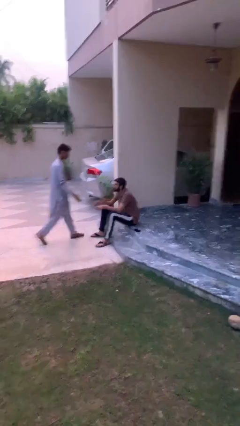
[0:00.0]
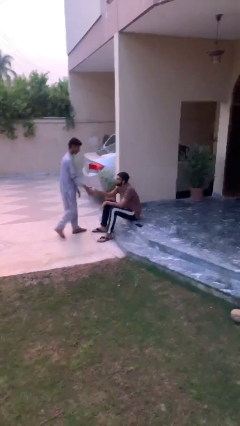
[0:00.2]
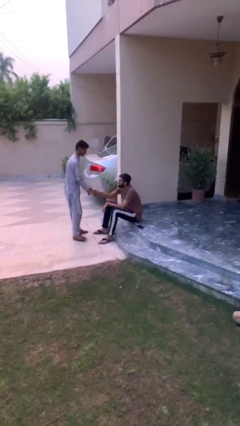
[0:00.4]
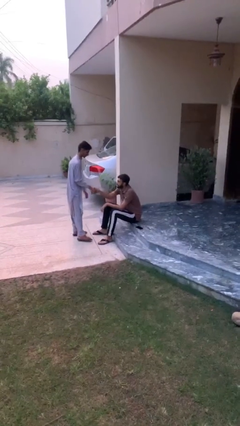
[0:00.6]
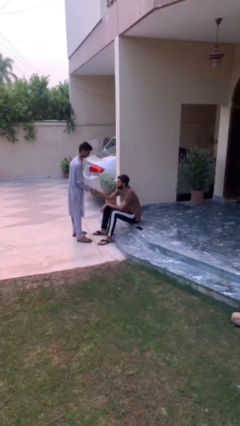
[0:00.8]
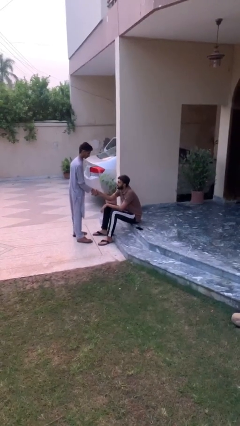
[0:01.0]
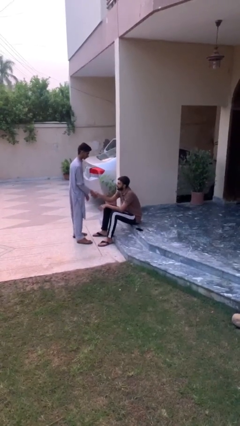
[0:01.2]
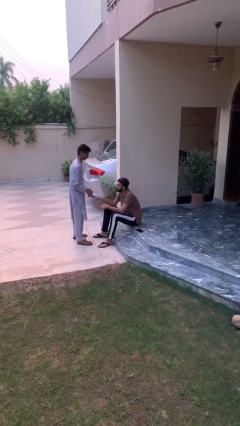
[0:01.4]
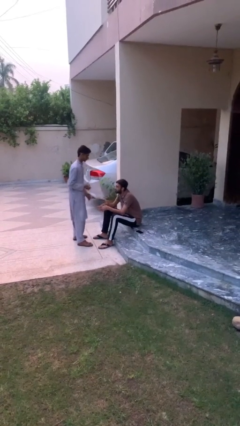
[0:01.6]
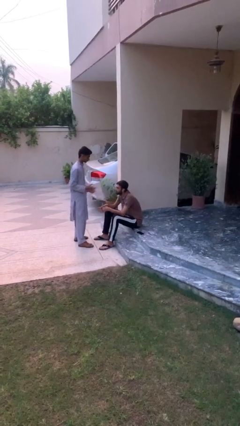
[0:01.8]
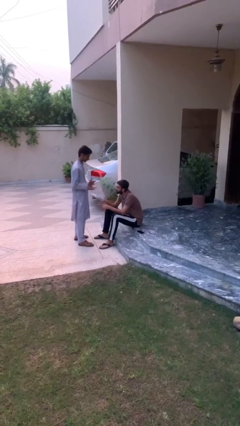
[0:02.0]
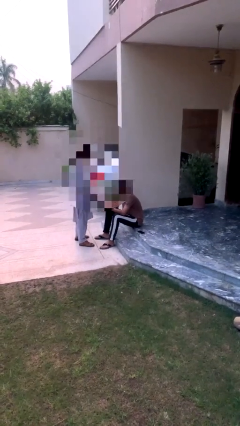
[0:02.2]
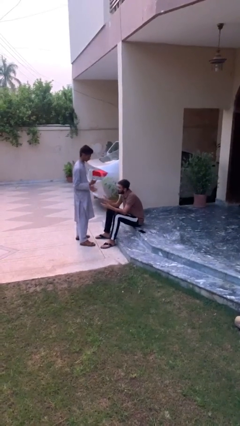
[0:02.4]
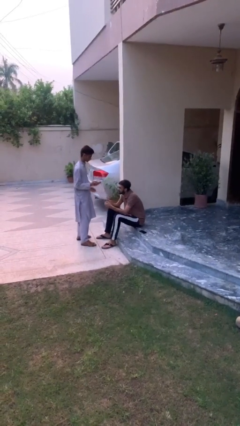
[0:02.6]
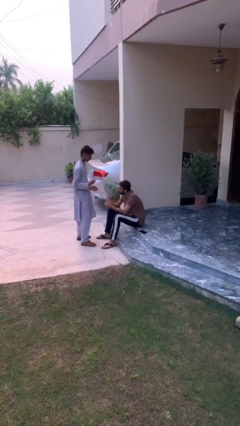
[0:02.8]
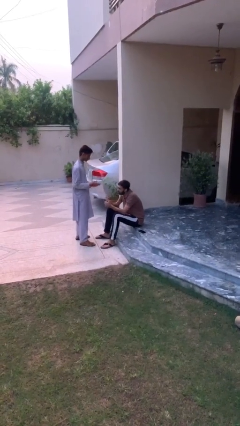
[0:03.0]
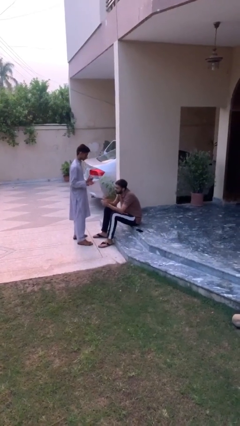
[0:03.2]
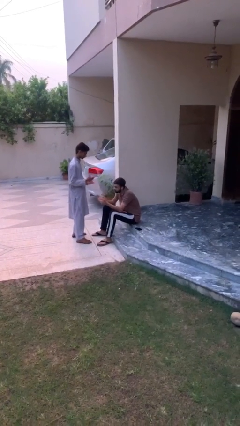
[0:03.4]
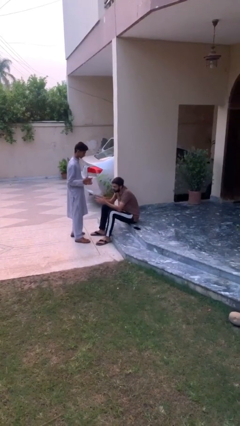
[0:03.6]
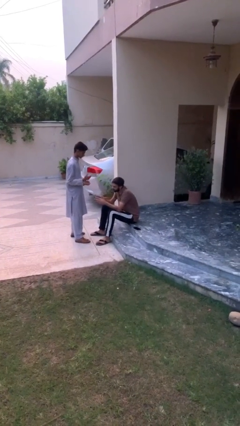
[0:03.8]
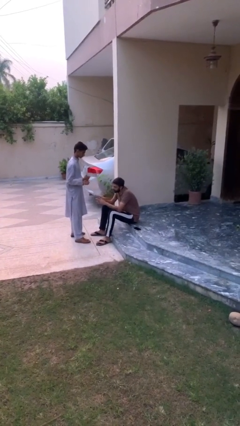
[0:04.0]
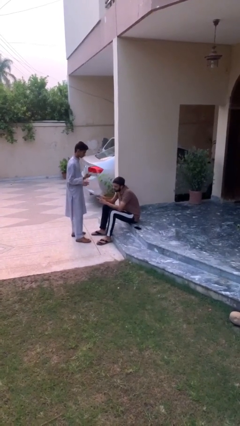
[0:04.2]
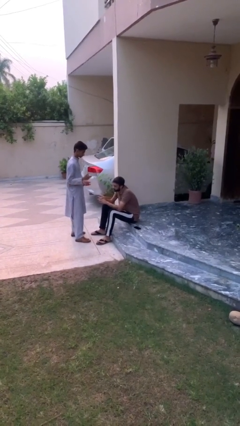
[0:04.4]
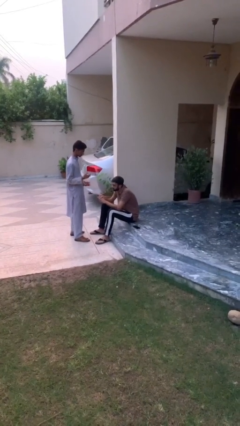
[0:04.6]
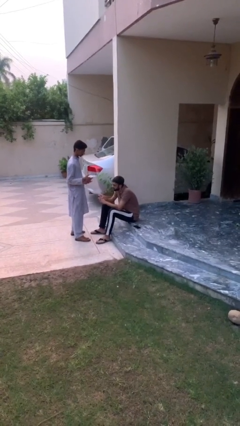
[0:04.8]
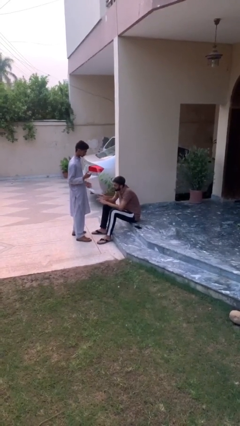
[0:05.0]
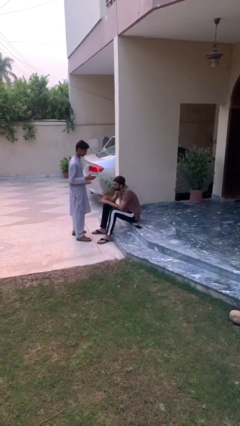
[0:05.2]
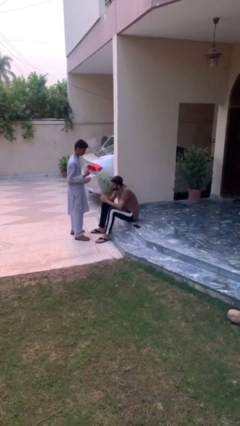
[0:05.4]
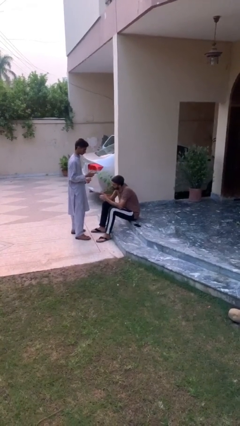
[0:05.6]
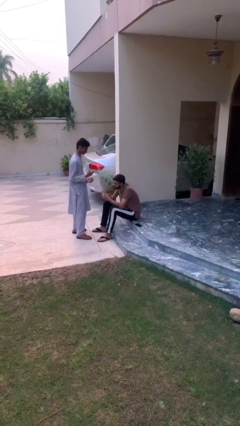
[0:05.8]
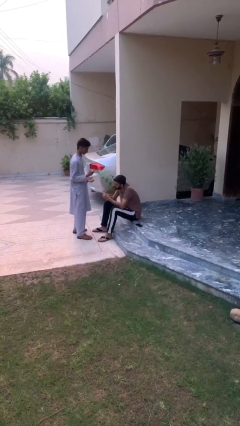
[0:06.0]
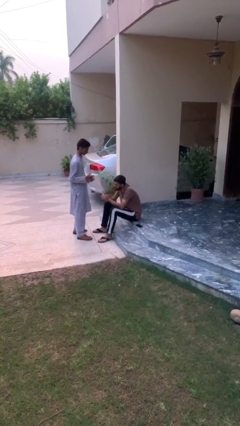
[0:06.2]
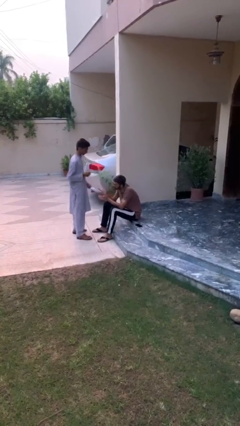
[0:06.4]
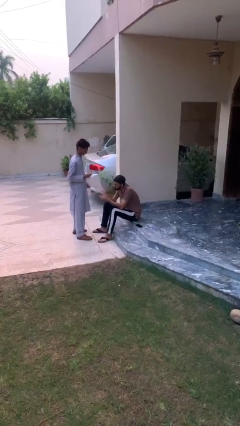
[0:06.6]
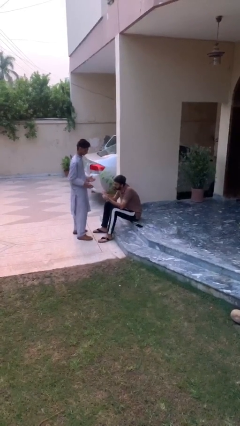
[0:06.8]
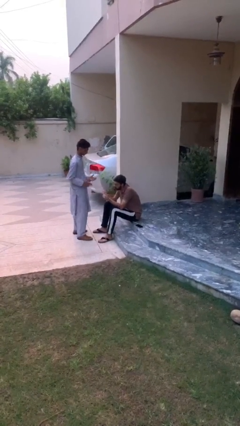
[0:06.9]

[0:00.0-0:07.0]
person shakes hand

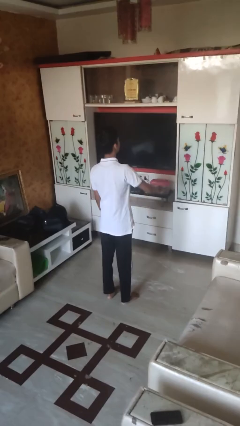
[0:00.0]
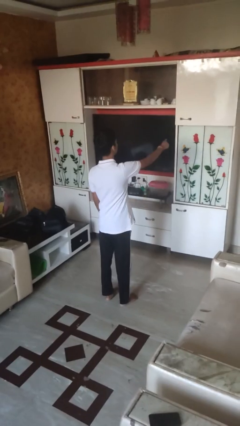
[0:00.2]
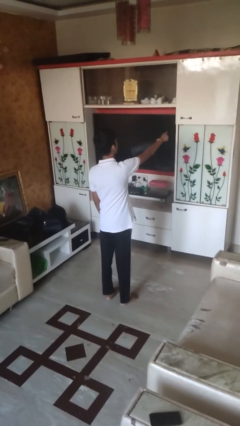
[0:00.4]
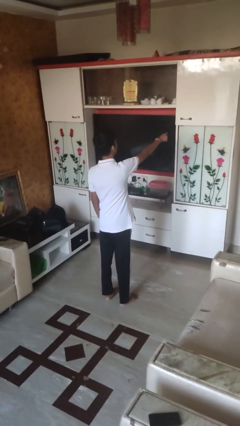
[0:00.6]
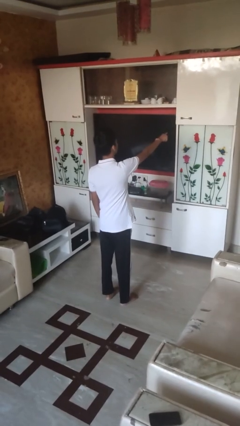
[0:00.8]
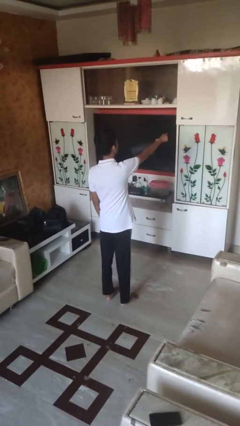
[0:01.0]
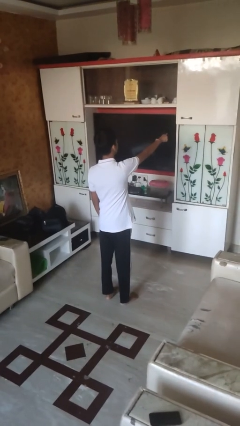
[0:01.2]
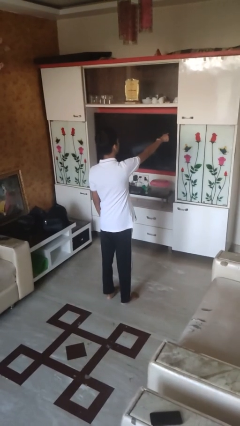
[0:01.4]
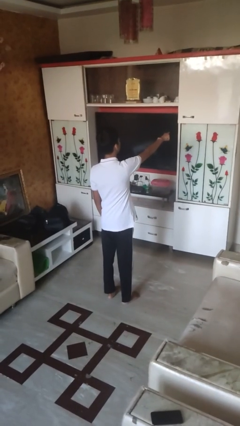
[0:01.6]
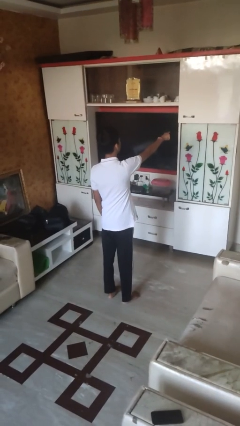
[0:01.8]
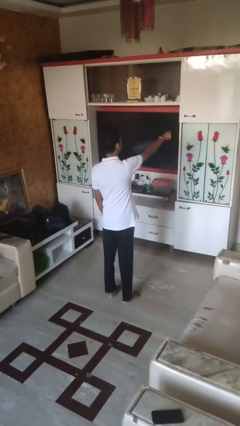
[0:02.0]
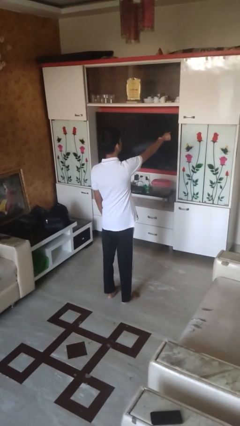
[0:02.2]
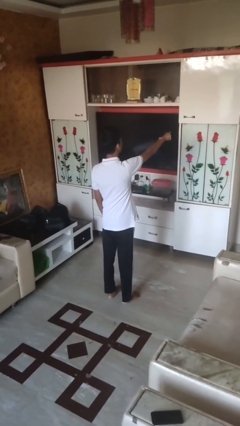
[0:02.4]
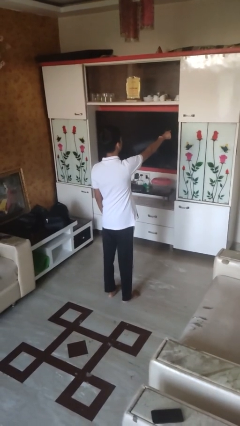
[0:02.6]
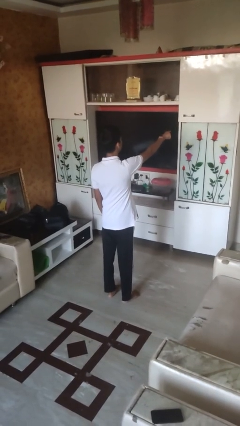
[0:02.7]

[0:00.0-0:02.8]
person points at person

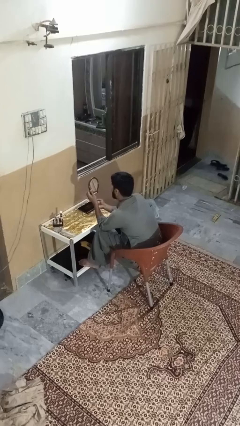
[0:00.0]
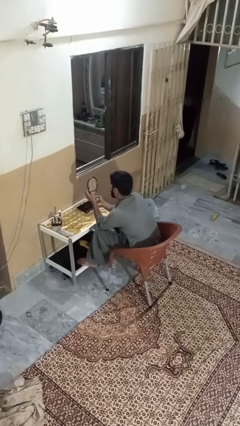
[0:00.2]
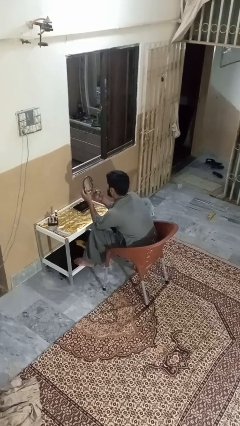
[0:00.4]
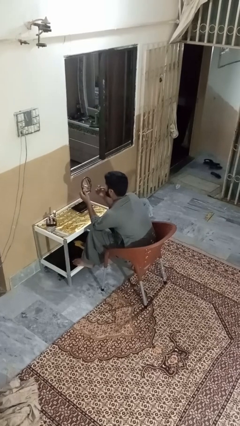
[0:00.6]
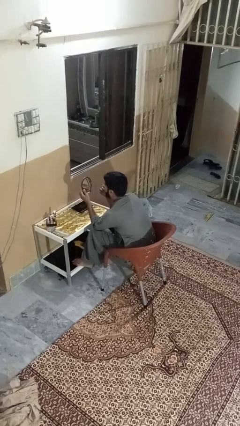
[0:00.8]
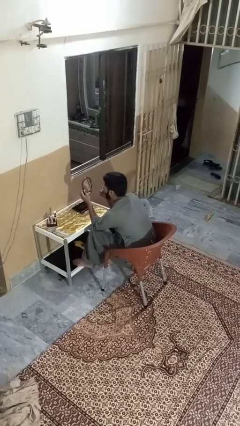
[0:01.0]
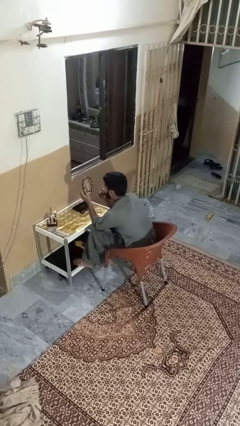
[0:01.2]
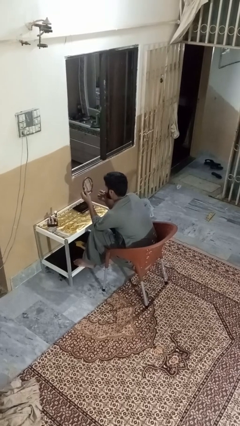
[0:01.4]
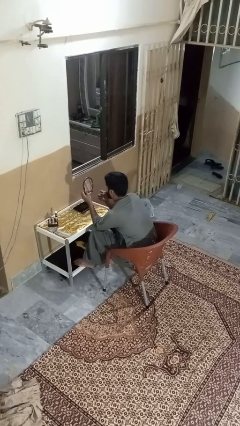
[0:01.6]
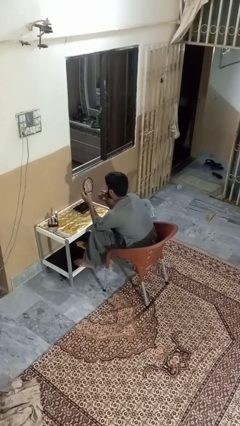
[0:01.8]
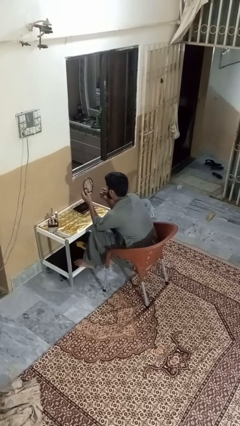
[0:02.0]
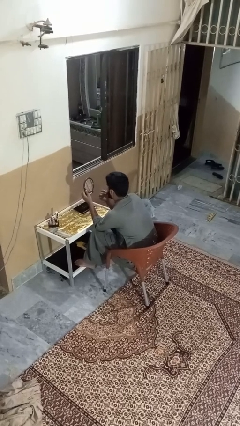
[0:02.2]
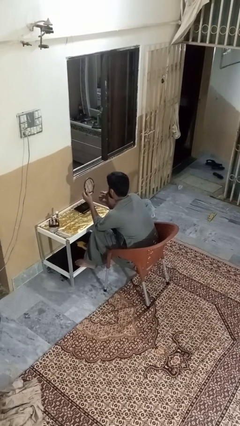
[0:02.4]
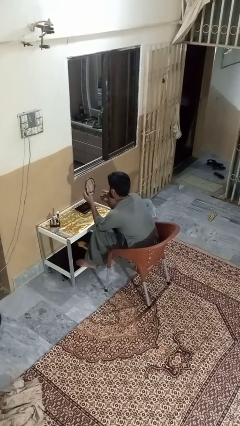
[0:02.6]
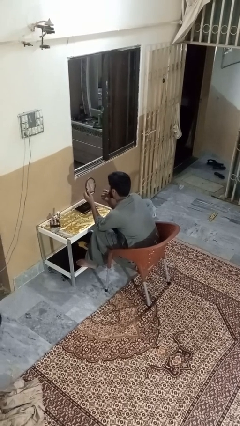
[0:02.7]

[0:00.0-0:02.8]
person applies lip makeup

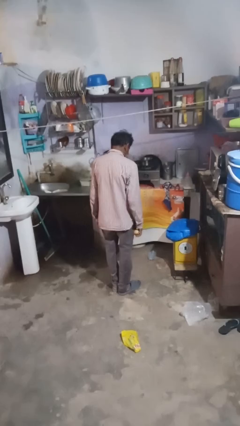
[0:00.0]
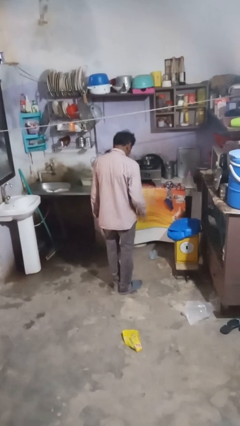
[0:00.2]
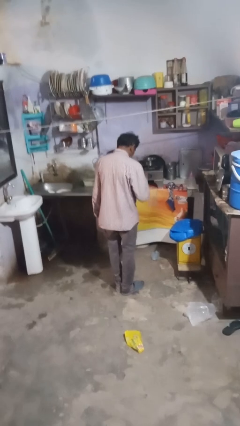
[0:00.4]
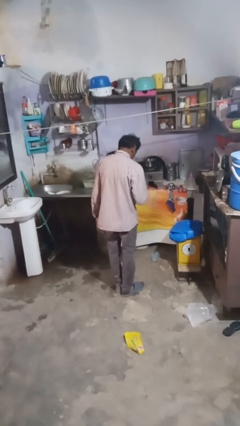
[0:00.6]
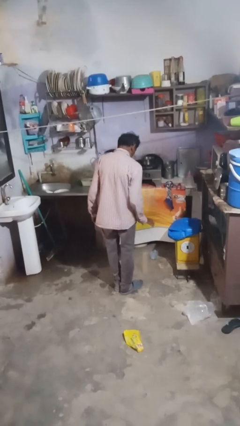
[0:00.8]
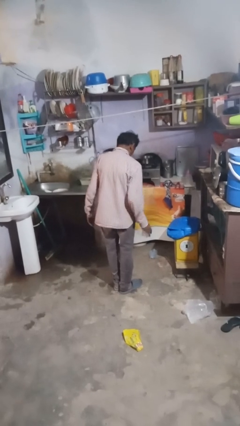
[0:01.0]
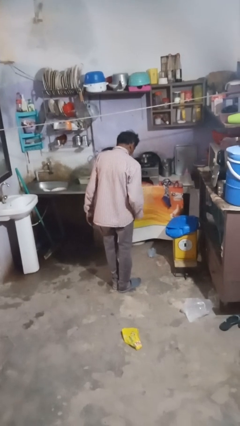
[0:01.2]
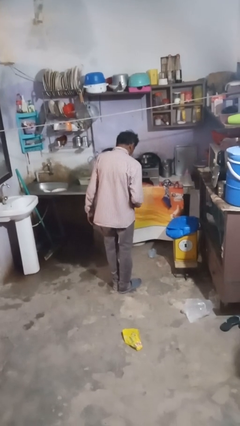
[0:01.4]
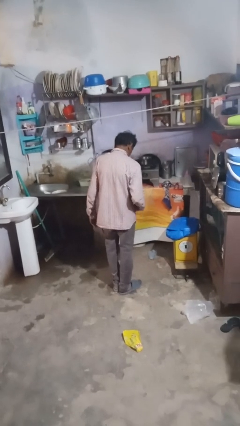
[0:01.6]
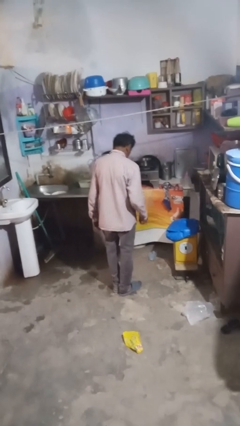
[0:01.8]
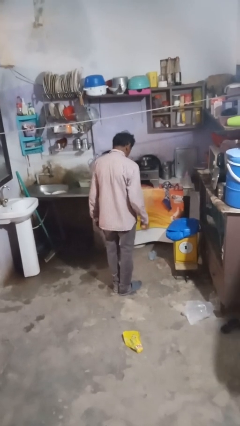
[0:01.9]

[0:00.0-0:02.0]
person bounces ball on floor

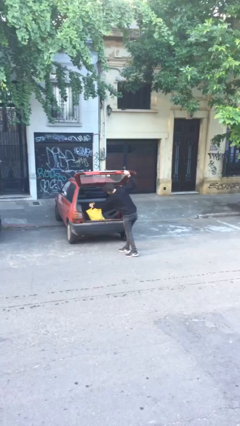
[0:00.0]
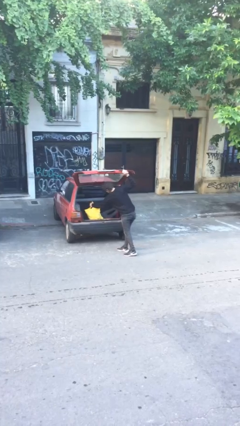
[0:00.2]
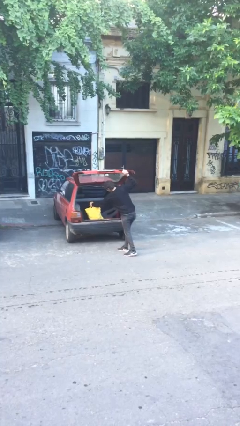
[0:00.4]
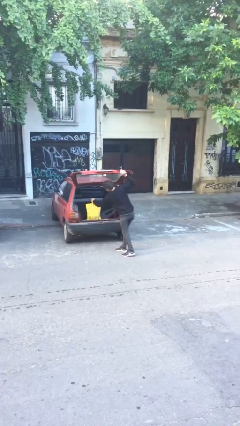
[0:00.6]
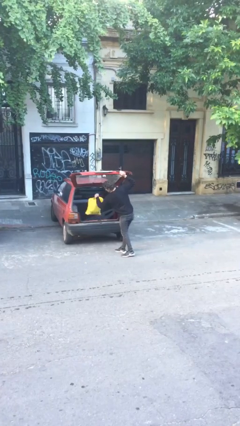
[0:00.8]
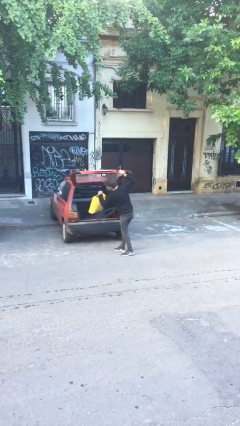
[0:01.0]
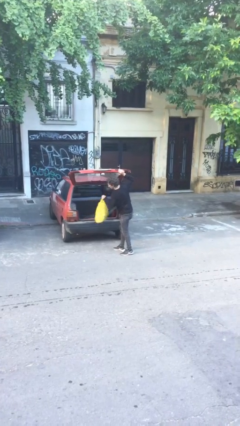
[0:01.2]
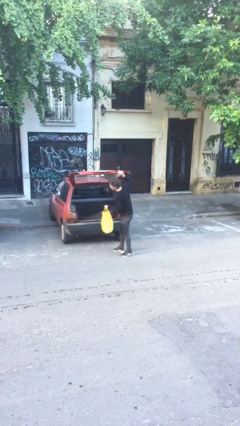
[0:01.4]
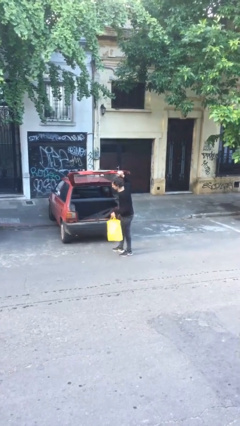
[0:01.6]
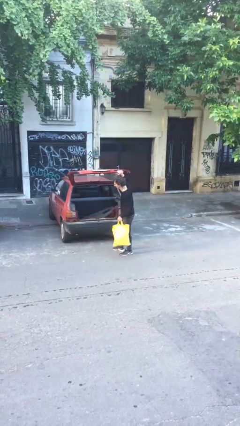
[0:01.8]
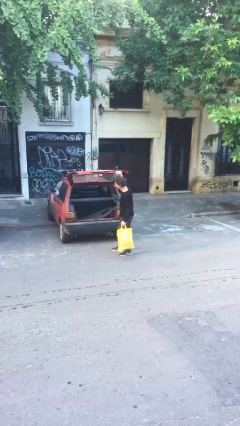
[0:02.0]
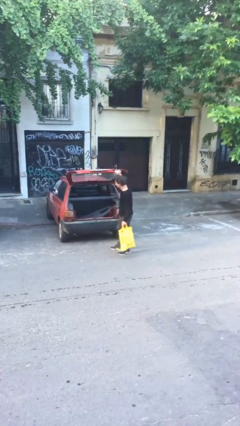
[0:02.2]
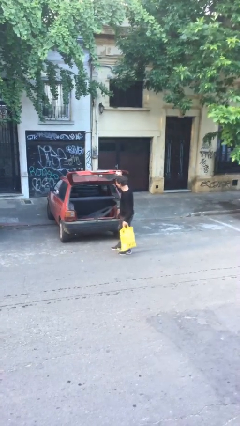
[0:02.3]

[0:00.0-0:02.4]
person unloads car

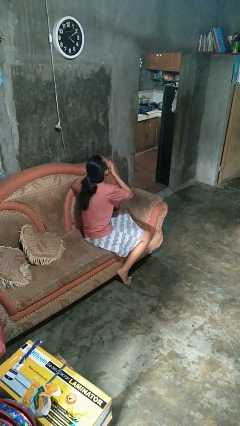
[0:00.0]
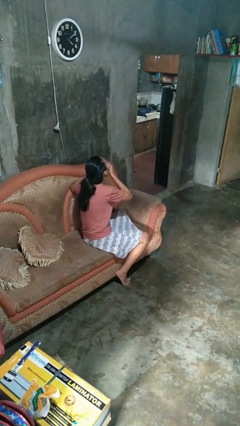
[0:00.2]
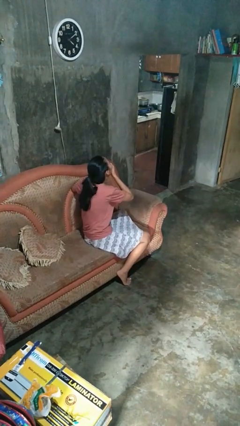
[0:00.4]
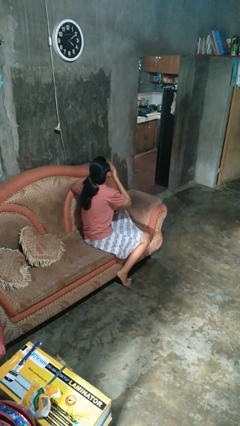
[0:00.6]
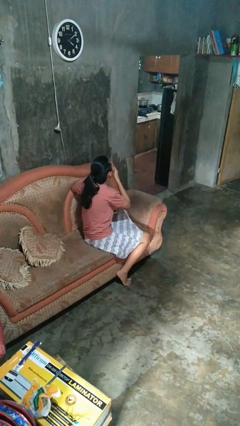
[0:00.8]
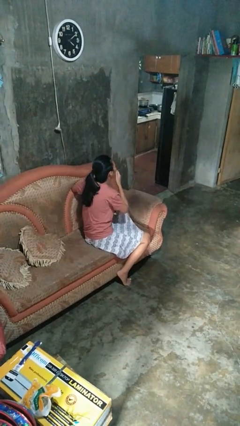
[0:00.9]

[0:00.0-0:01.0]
person yawns
